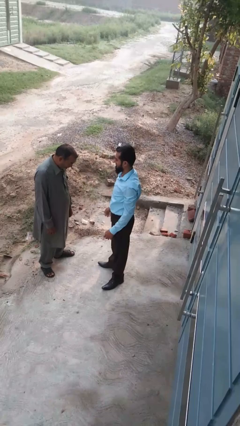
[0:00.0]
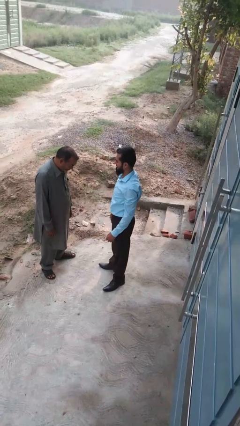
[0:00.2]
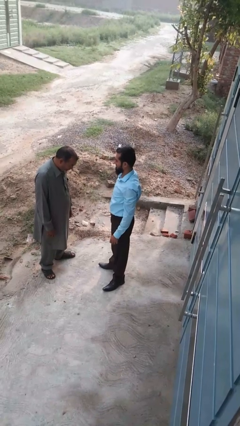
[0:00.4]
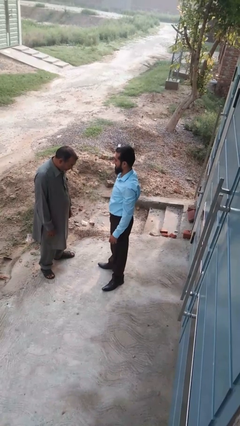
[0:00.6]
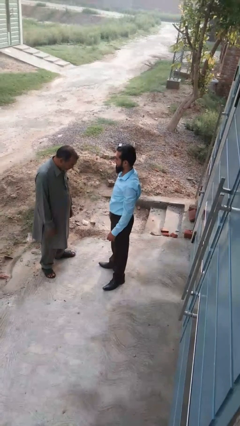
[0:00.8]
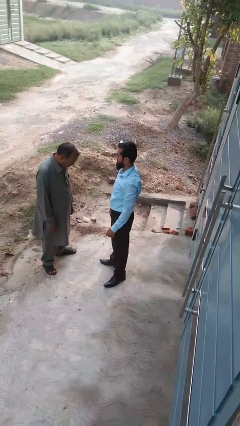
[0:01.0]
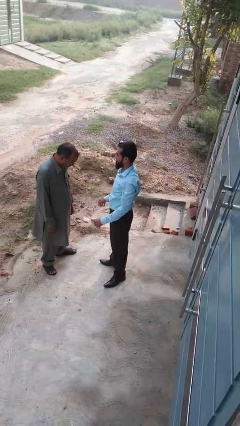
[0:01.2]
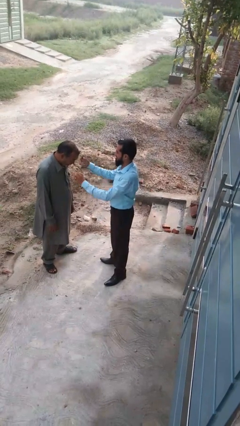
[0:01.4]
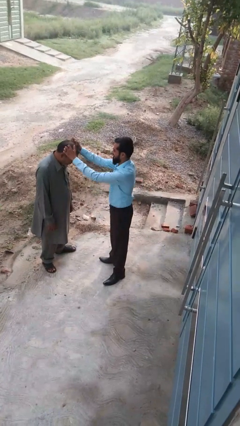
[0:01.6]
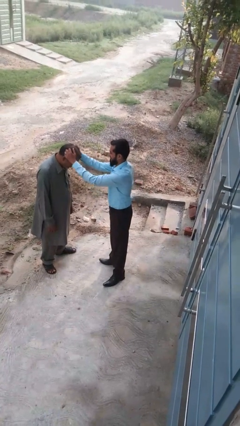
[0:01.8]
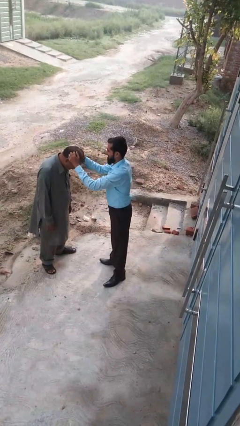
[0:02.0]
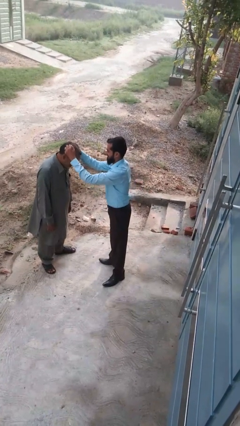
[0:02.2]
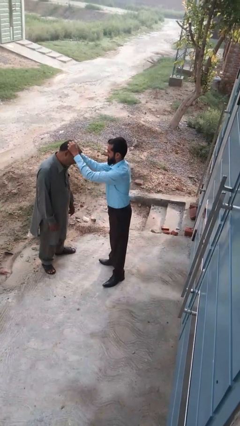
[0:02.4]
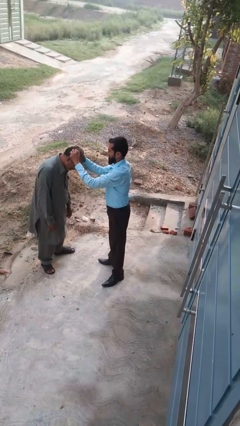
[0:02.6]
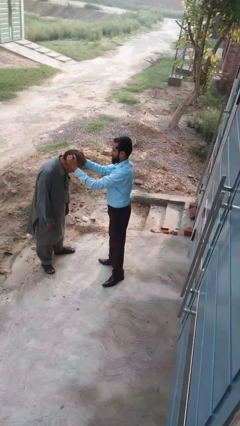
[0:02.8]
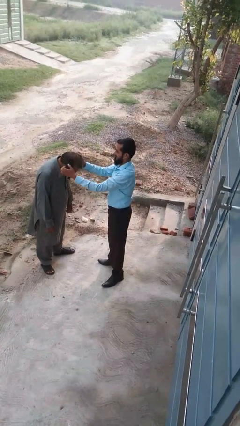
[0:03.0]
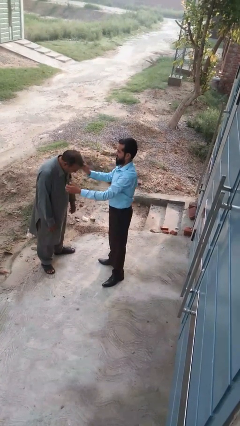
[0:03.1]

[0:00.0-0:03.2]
person grabs person by hair

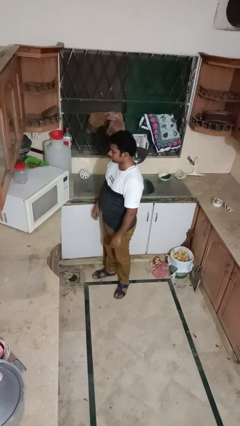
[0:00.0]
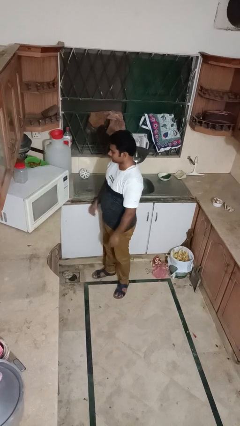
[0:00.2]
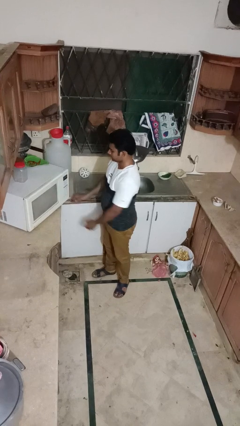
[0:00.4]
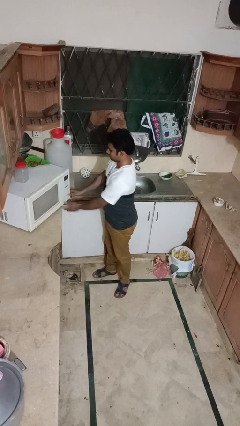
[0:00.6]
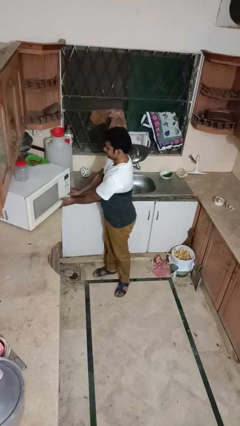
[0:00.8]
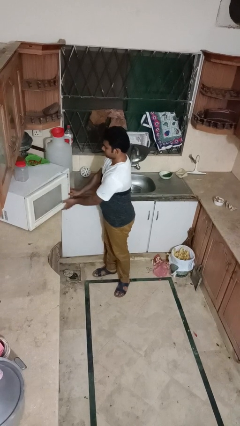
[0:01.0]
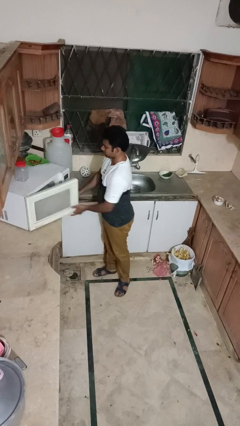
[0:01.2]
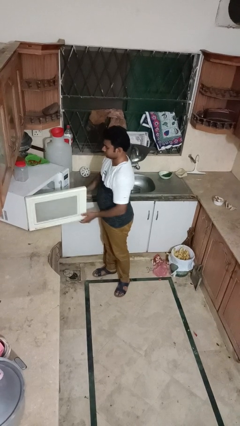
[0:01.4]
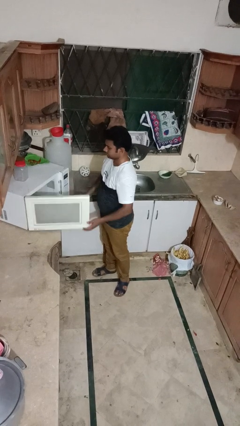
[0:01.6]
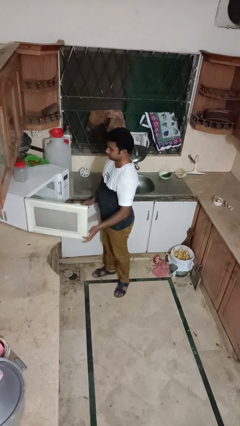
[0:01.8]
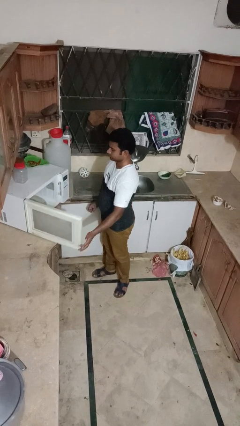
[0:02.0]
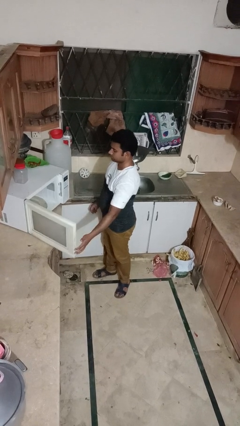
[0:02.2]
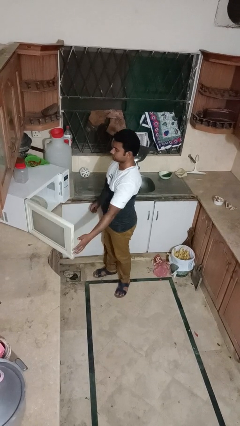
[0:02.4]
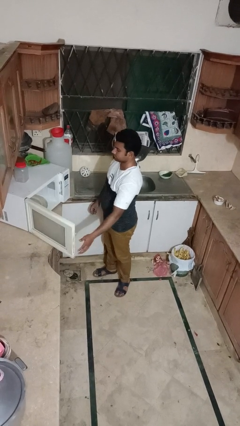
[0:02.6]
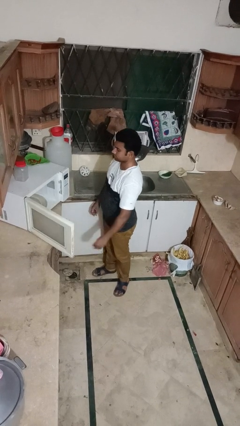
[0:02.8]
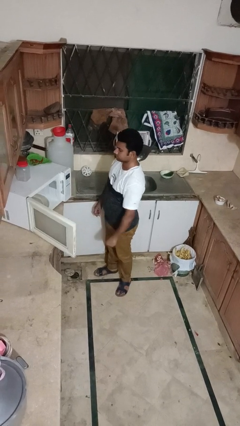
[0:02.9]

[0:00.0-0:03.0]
person opens oven door

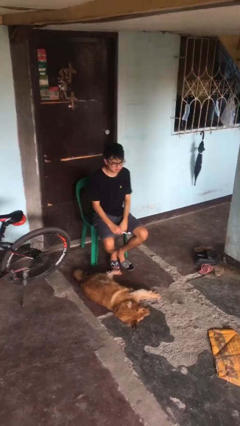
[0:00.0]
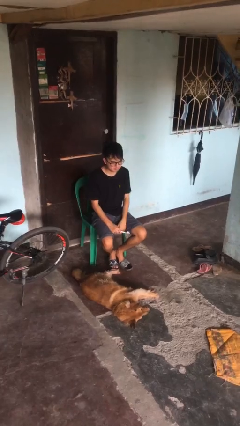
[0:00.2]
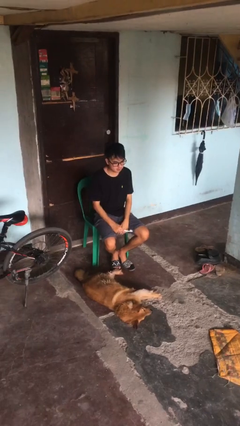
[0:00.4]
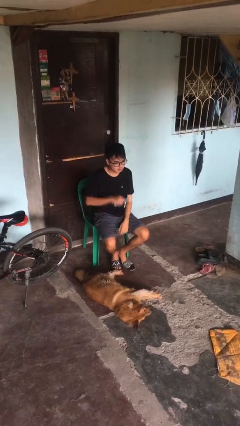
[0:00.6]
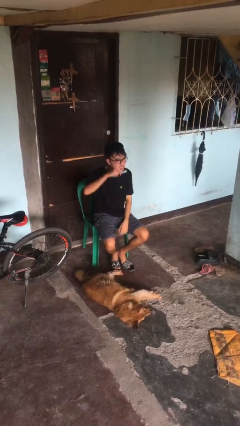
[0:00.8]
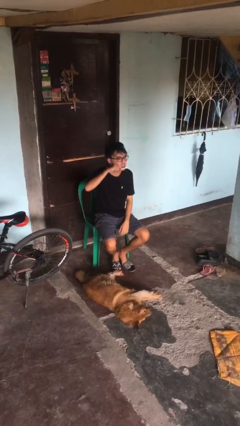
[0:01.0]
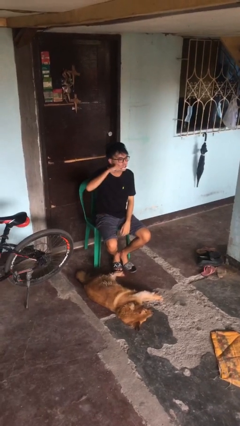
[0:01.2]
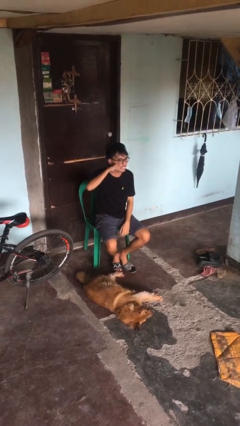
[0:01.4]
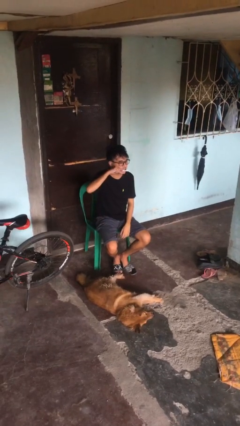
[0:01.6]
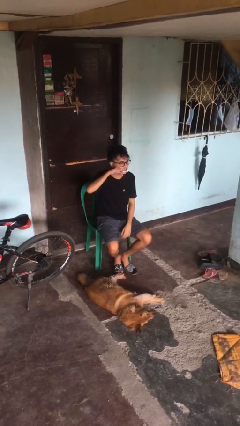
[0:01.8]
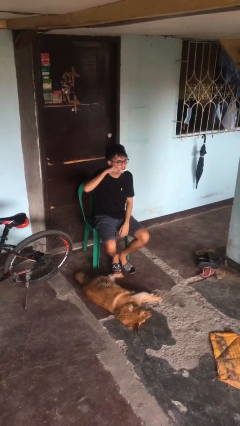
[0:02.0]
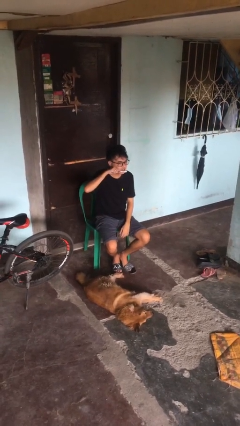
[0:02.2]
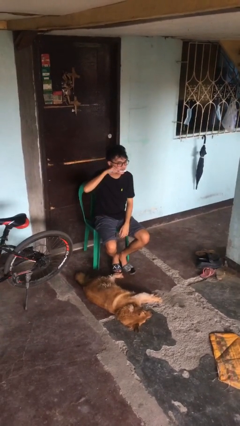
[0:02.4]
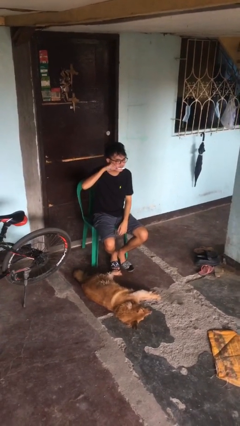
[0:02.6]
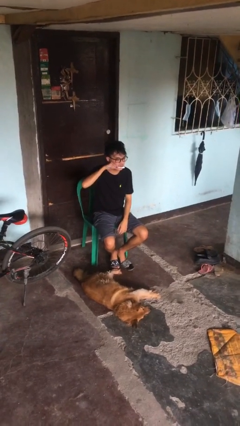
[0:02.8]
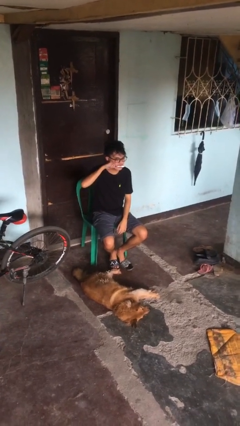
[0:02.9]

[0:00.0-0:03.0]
person brushes teeth

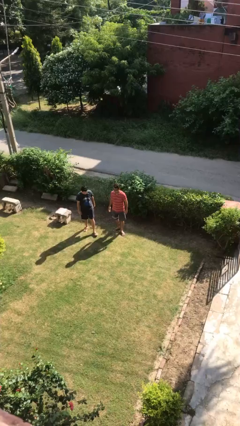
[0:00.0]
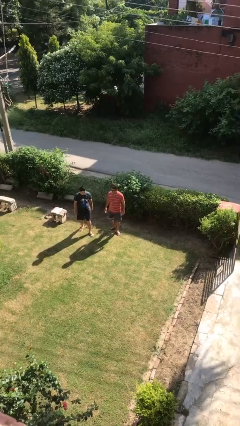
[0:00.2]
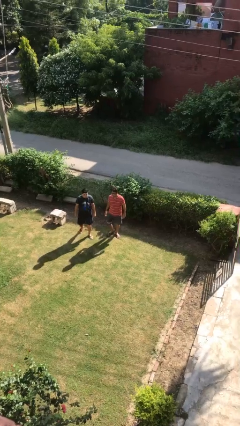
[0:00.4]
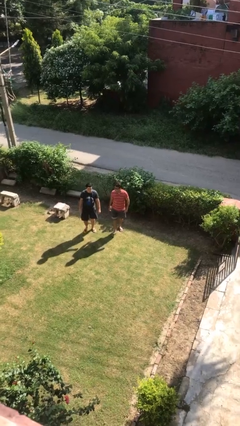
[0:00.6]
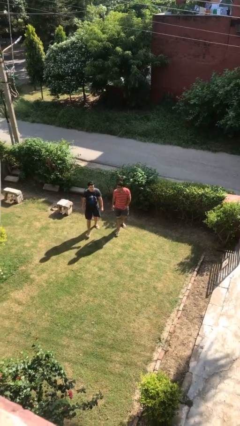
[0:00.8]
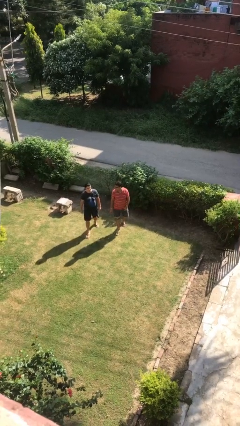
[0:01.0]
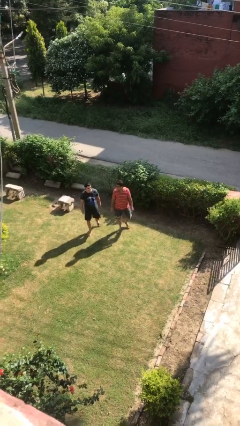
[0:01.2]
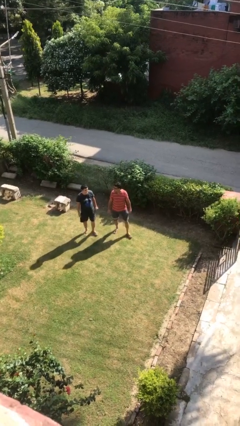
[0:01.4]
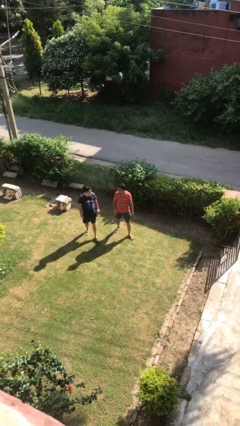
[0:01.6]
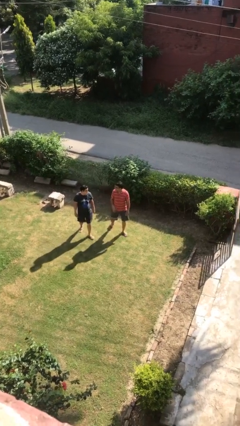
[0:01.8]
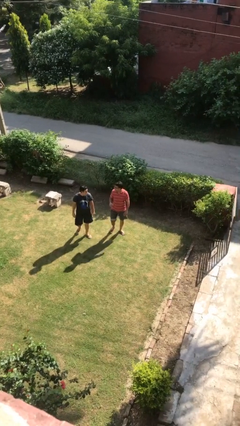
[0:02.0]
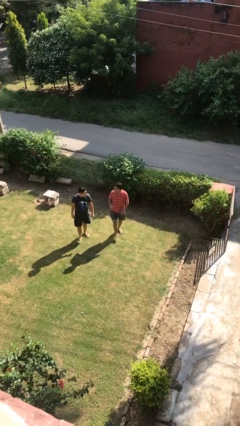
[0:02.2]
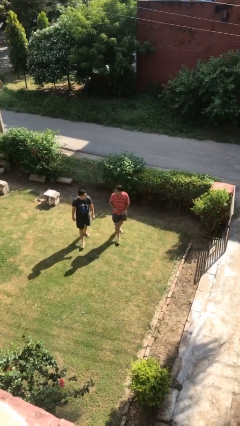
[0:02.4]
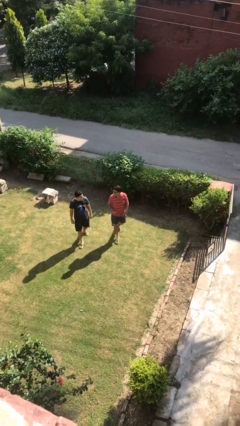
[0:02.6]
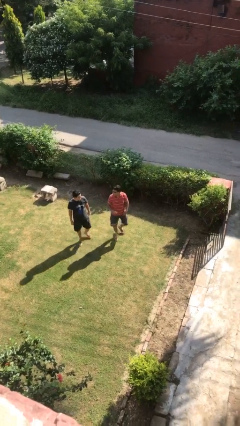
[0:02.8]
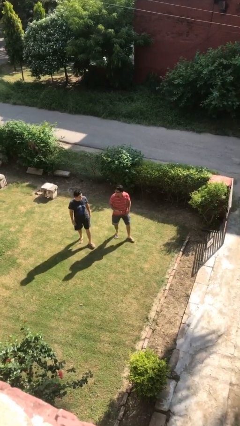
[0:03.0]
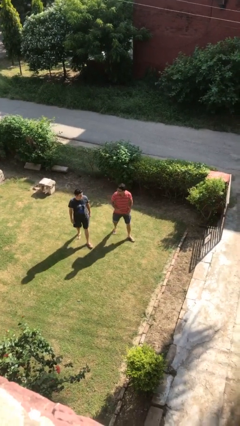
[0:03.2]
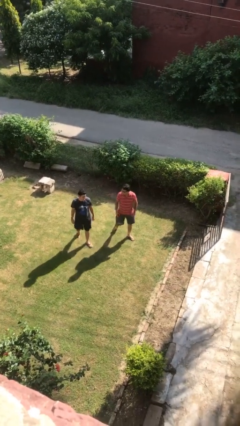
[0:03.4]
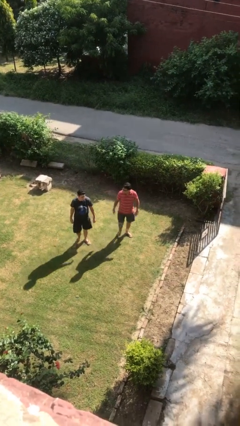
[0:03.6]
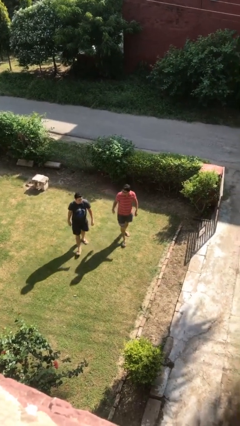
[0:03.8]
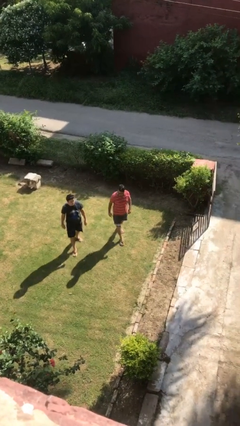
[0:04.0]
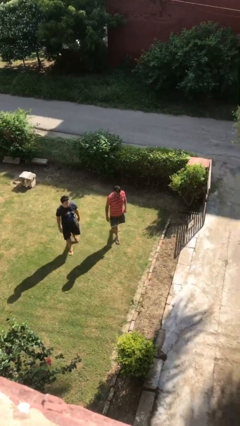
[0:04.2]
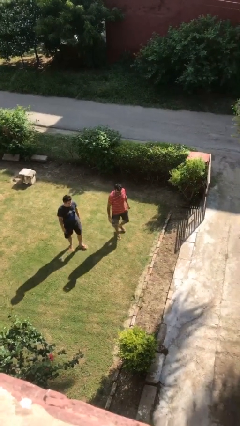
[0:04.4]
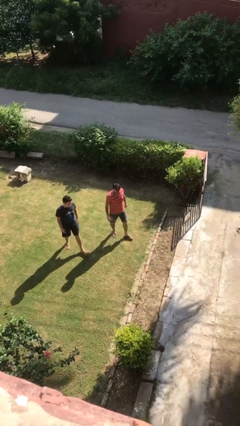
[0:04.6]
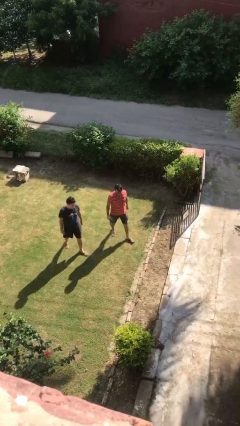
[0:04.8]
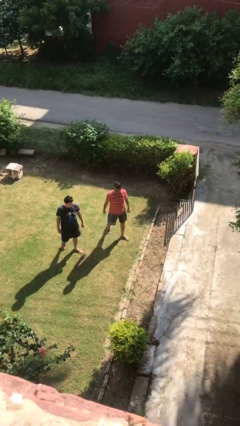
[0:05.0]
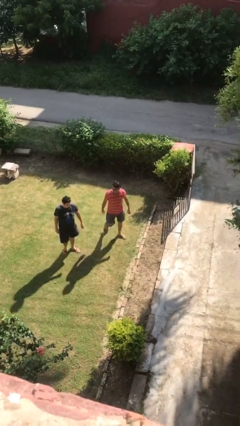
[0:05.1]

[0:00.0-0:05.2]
person talks to person

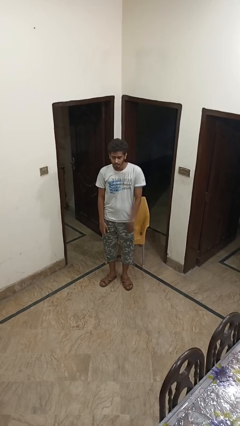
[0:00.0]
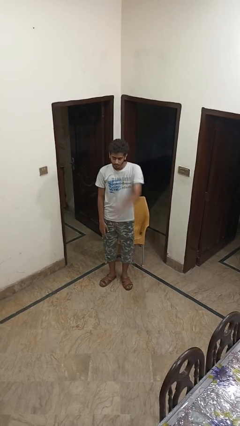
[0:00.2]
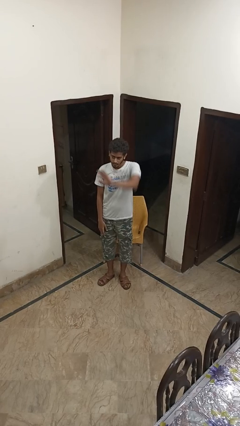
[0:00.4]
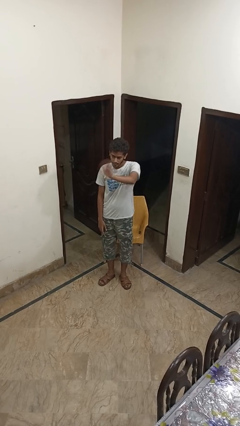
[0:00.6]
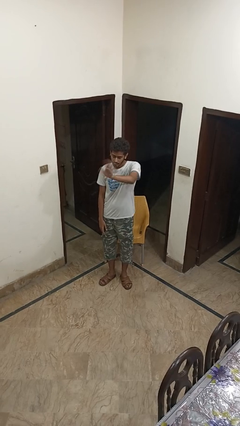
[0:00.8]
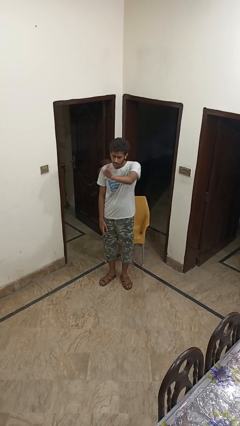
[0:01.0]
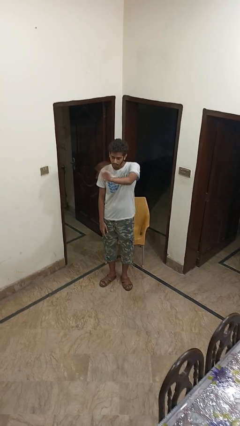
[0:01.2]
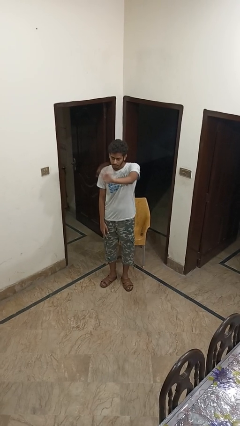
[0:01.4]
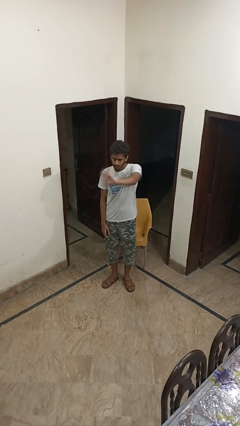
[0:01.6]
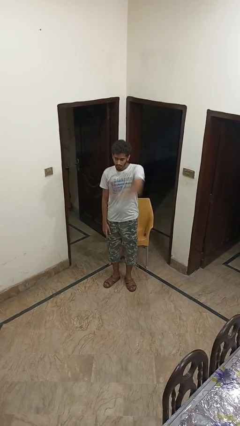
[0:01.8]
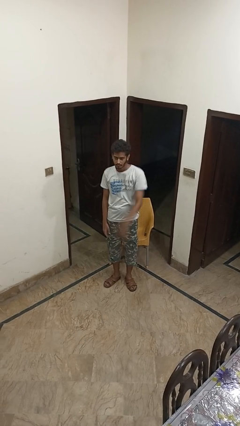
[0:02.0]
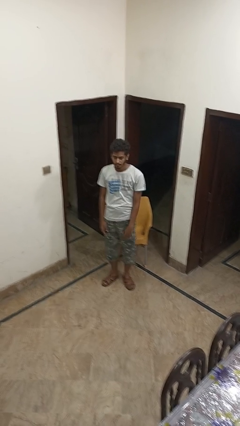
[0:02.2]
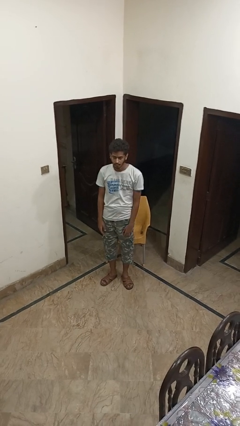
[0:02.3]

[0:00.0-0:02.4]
person waves at person

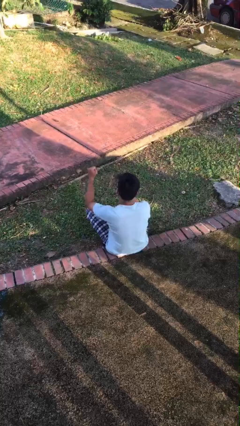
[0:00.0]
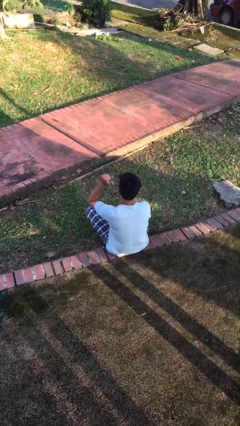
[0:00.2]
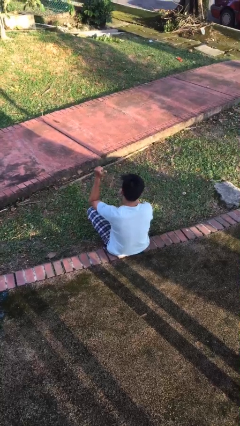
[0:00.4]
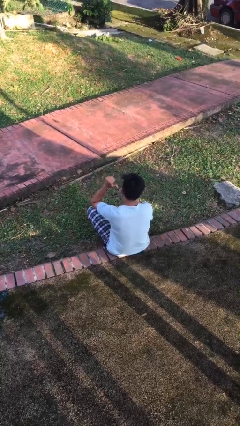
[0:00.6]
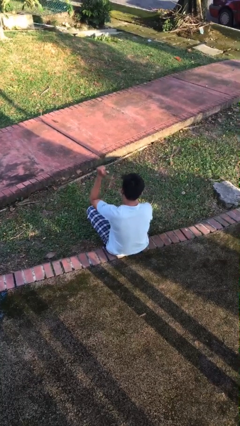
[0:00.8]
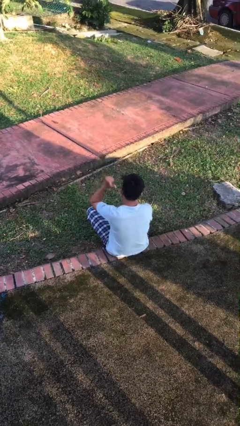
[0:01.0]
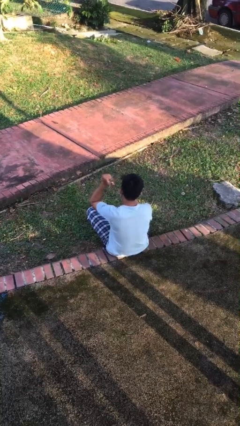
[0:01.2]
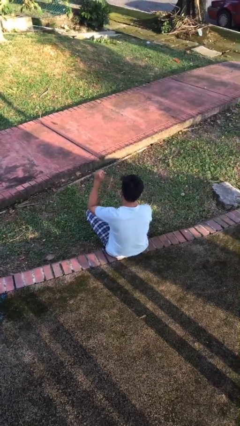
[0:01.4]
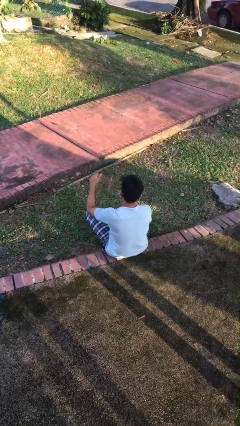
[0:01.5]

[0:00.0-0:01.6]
person gestures behind me
